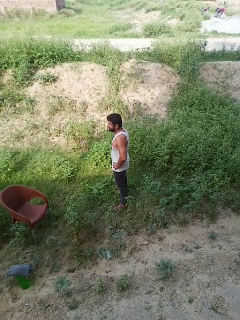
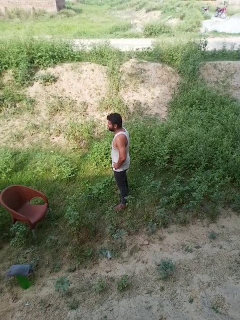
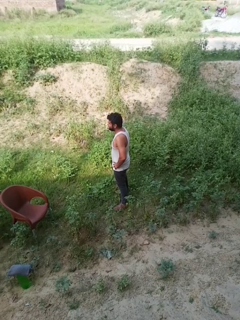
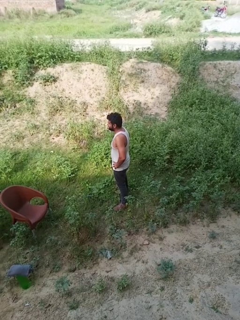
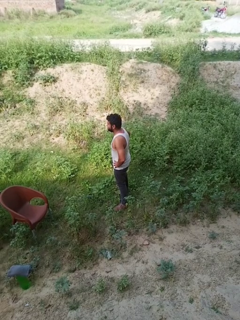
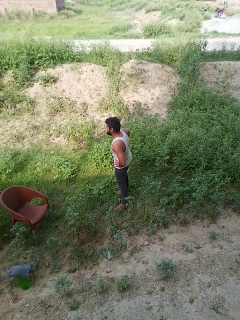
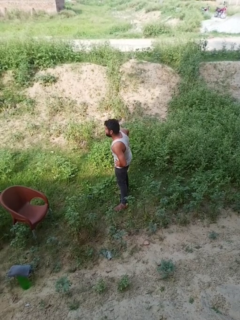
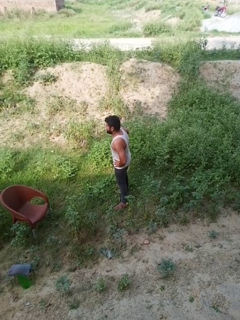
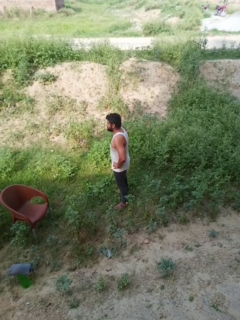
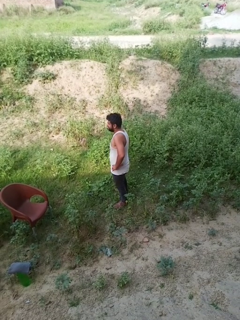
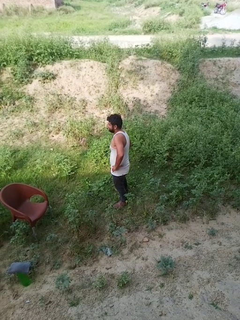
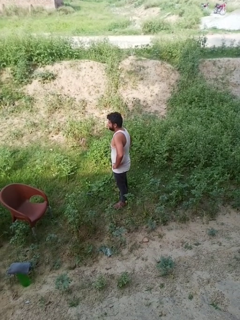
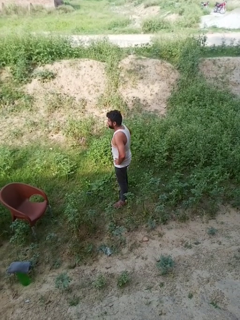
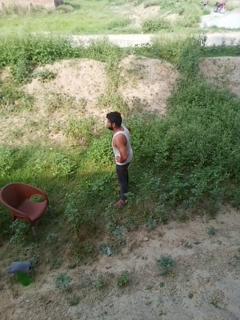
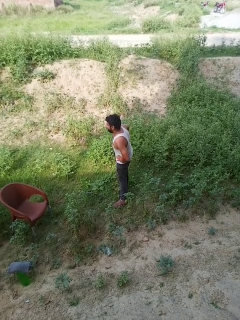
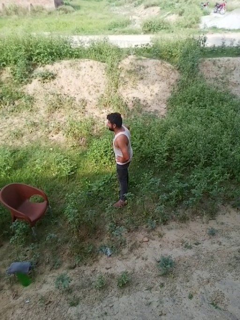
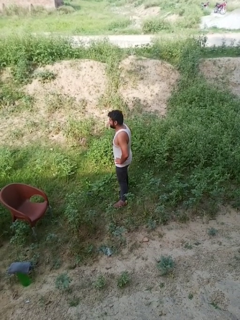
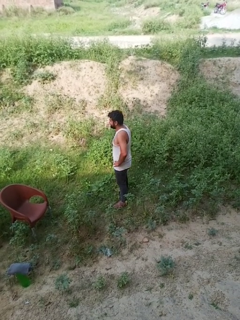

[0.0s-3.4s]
person wiggles hips

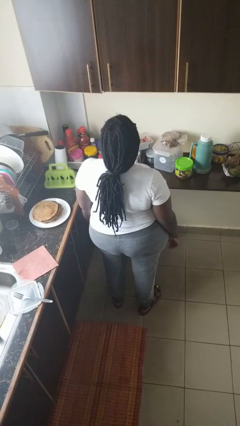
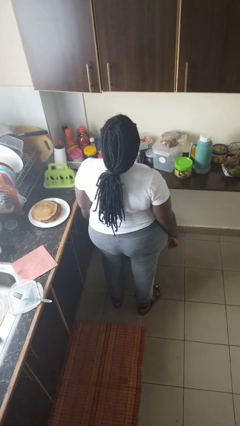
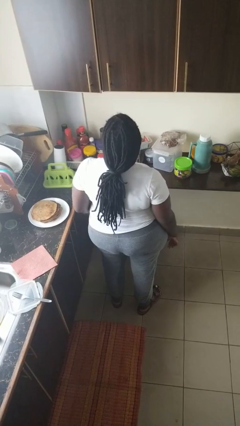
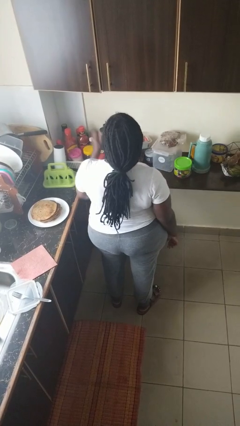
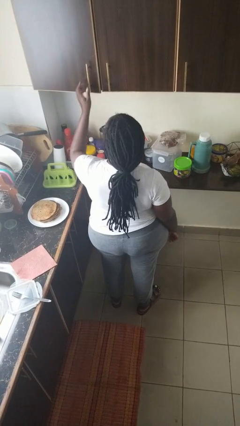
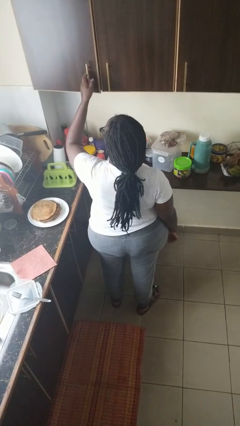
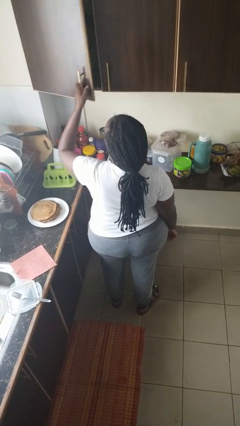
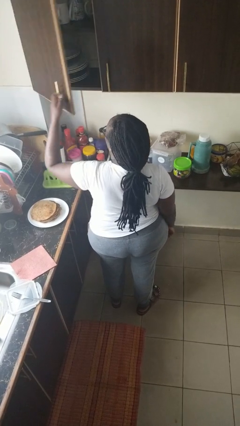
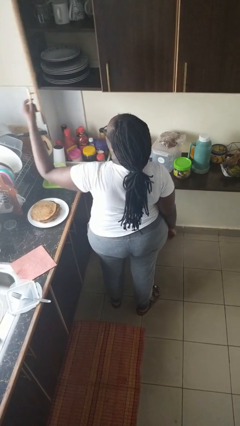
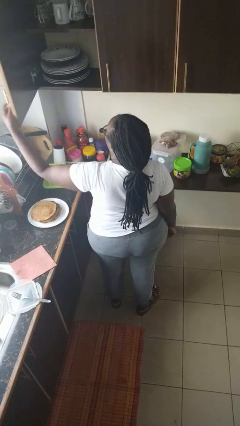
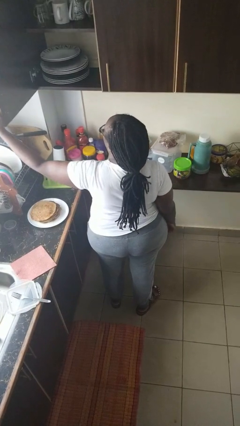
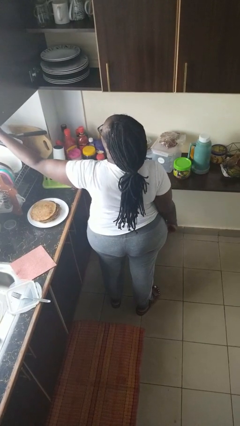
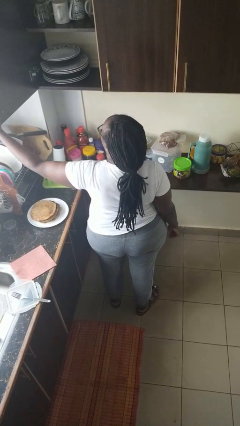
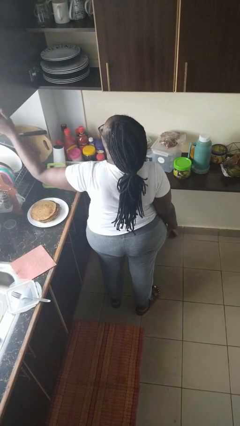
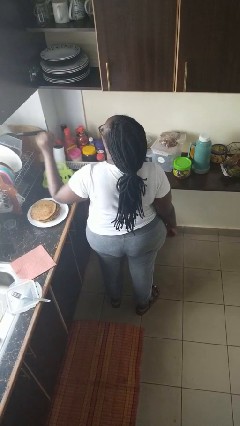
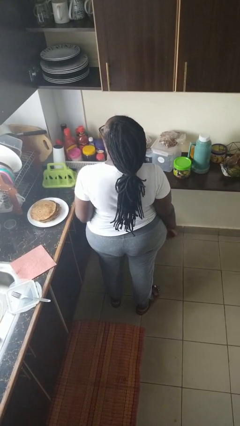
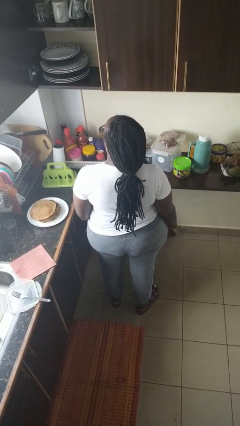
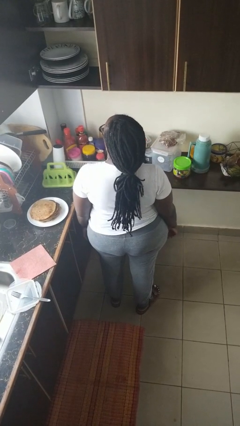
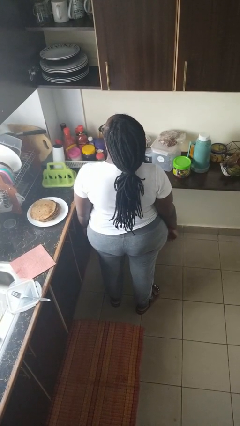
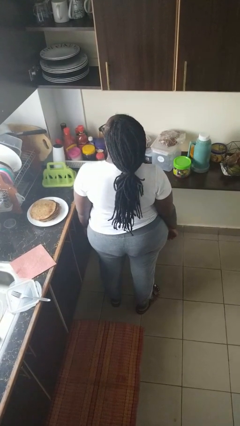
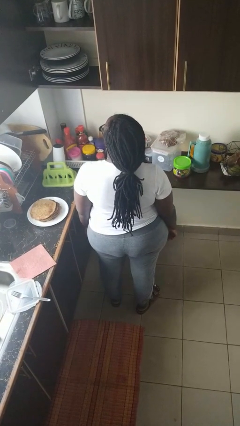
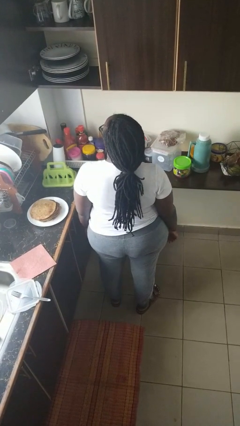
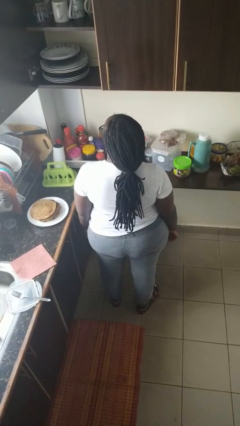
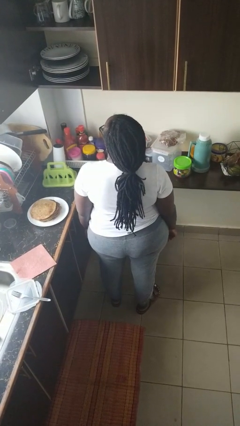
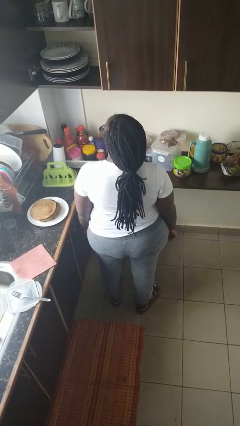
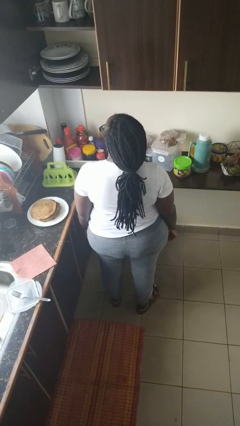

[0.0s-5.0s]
person opens cabinet

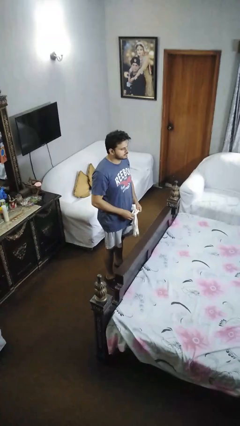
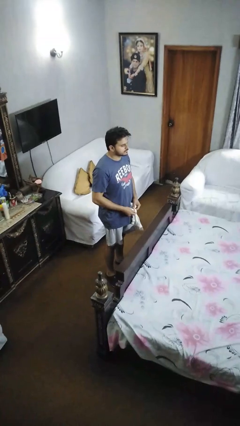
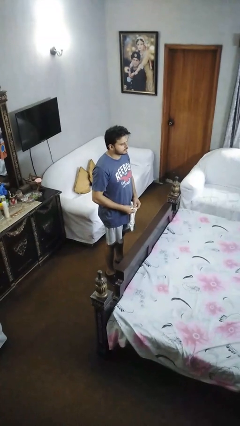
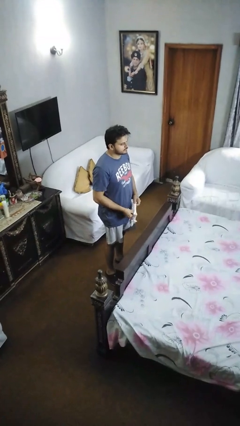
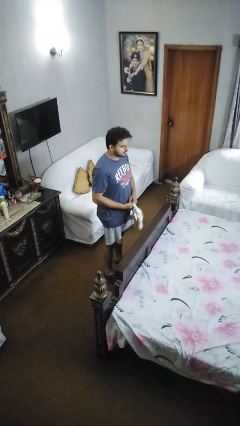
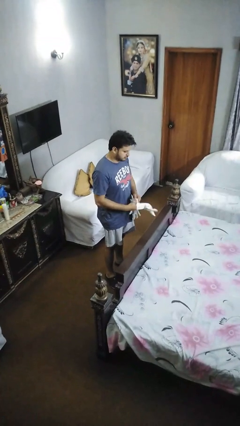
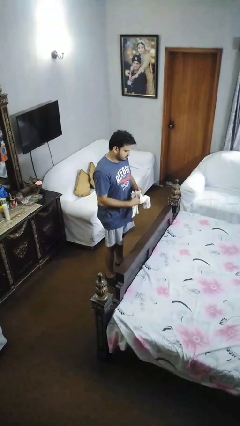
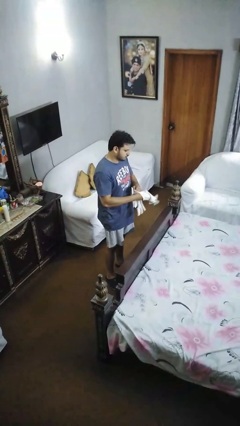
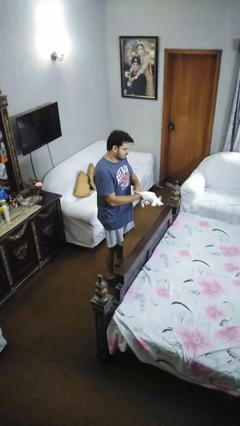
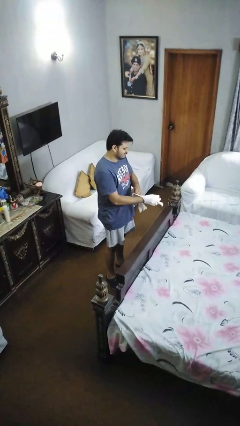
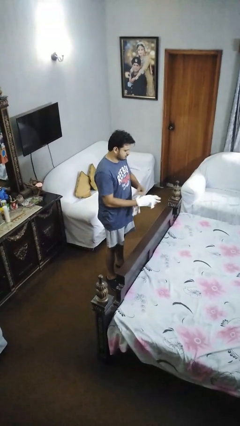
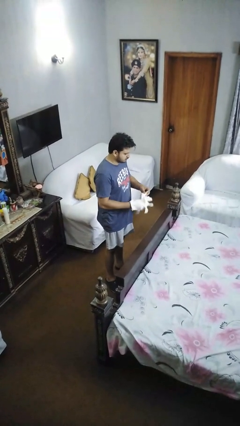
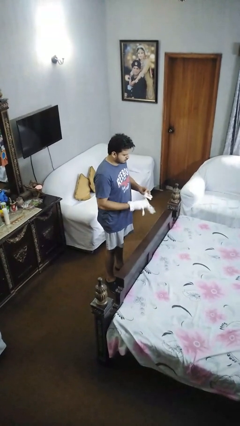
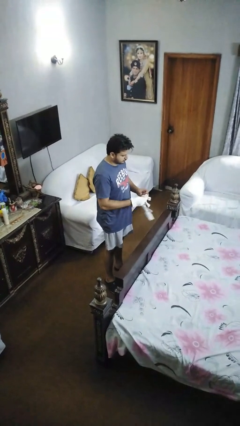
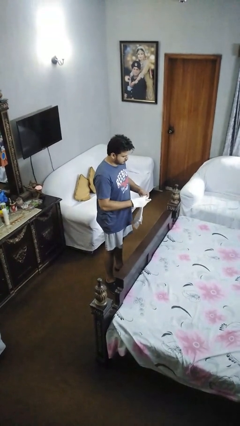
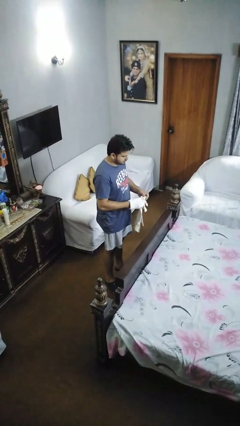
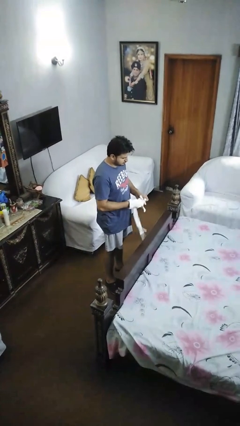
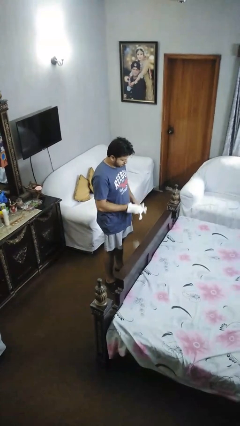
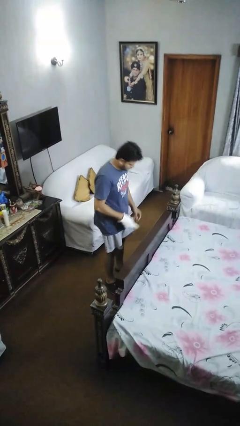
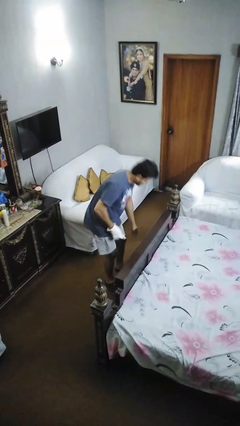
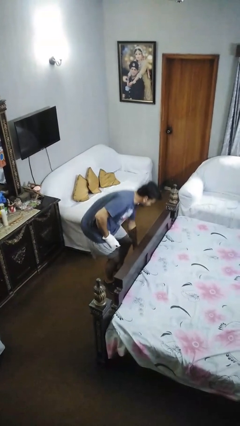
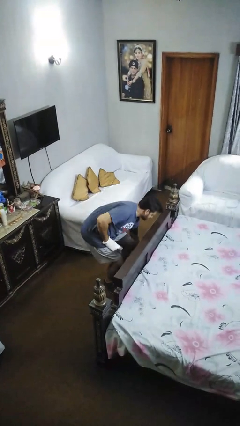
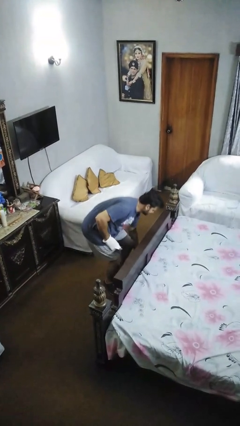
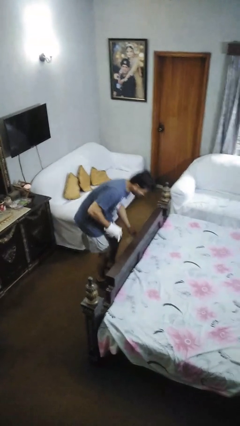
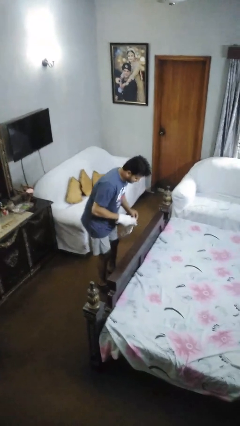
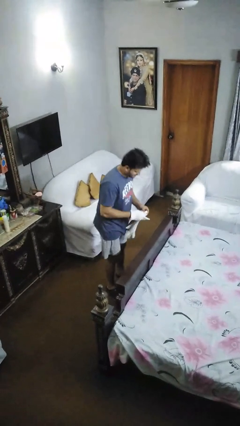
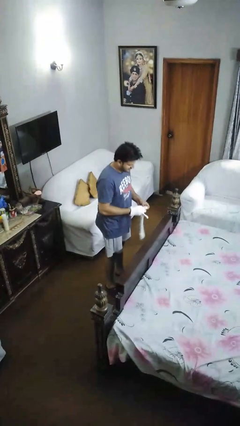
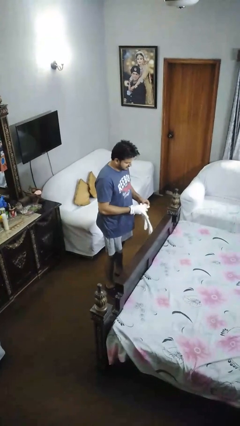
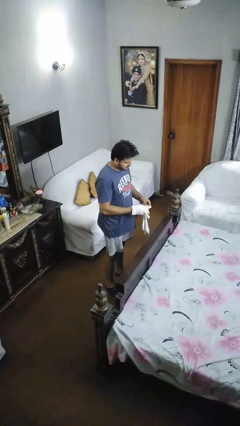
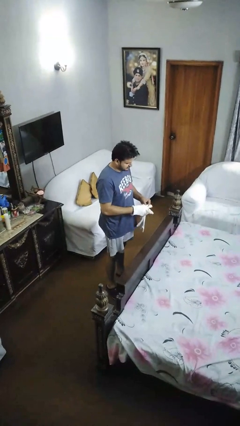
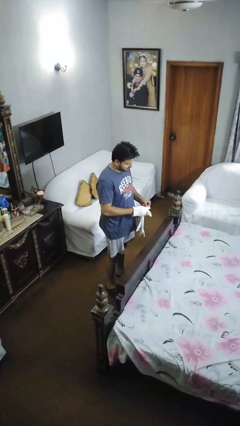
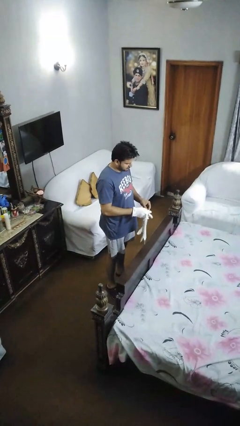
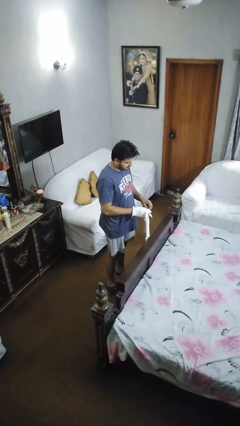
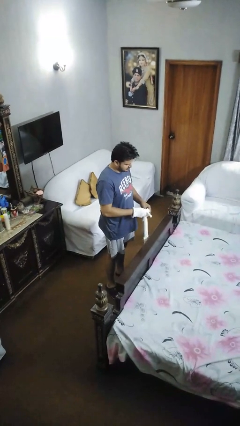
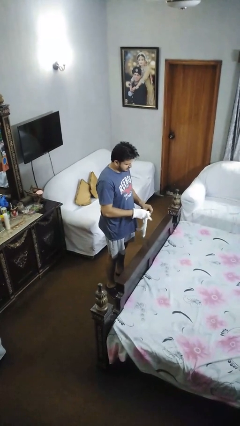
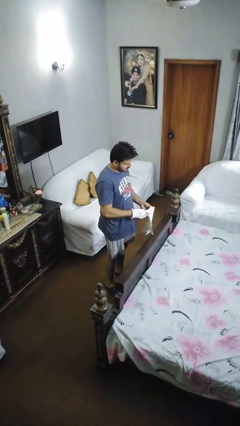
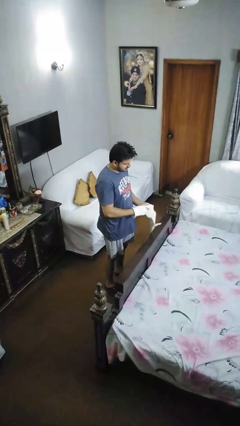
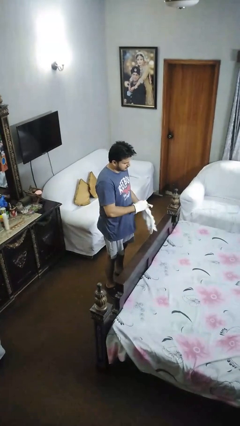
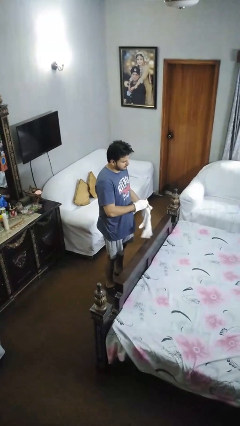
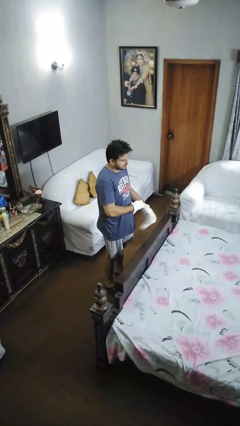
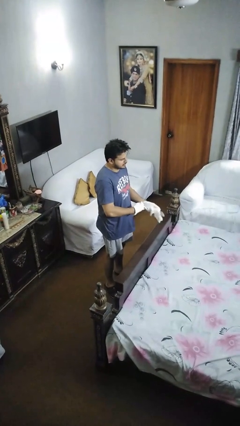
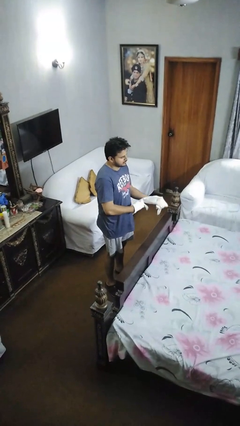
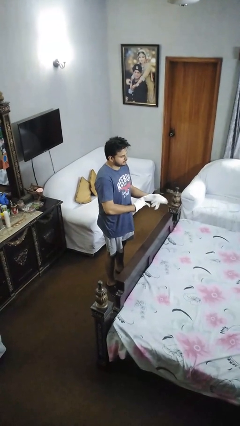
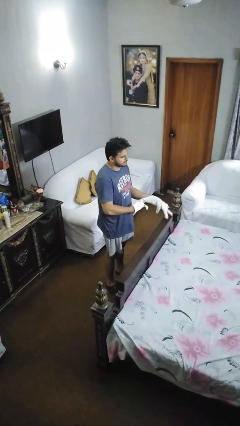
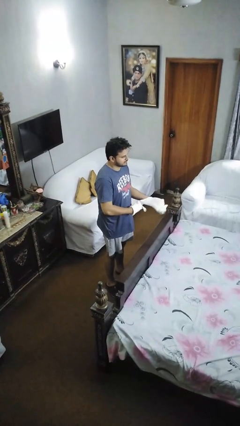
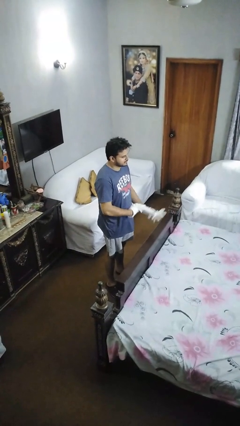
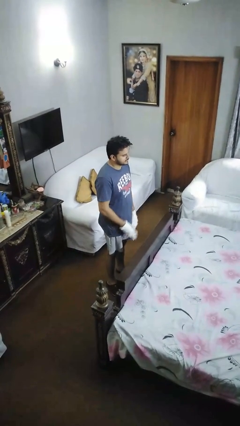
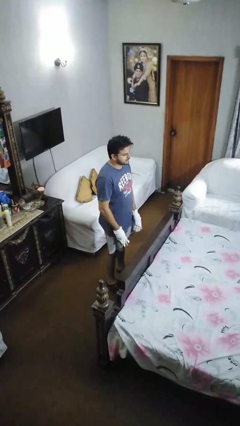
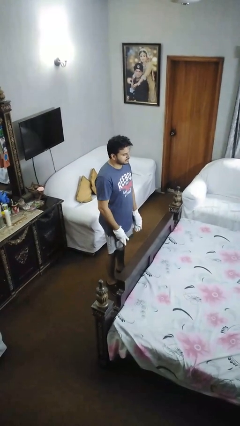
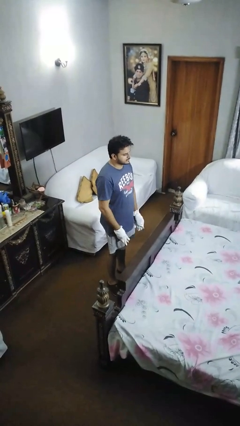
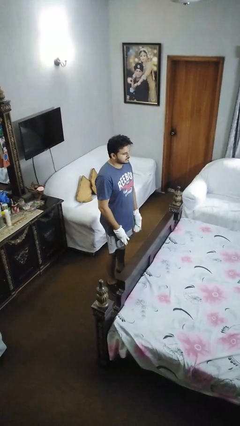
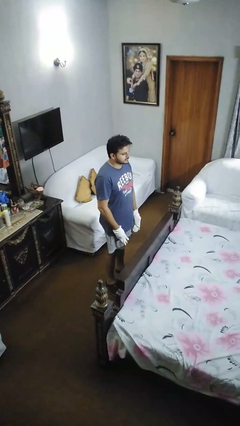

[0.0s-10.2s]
person puts on gloves

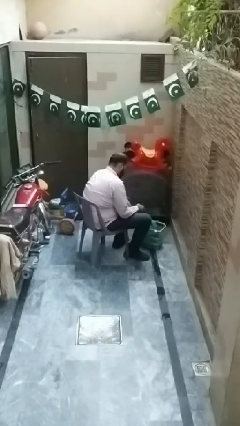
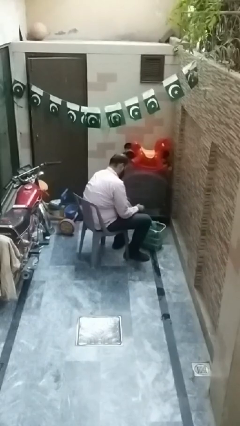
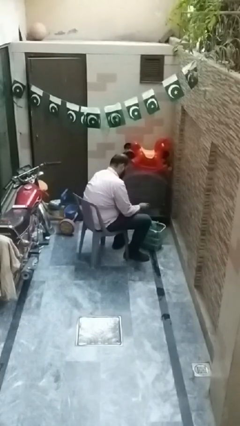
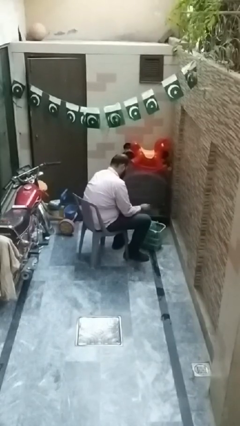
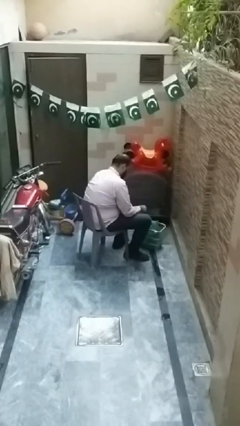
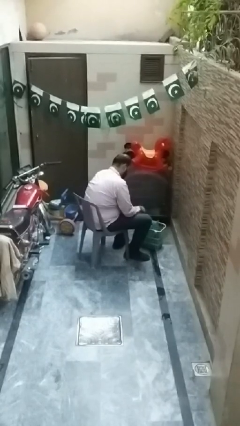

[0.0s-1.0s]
person puts object into basket
